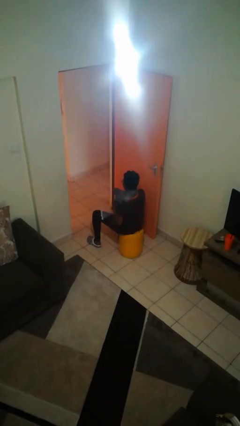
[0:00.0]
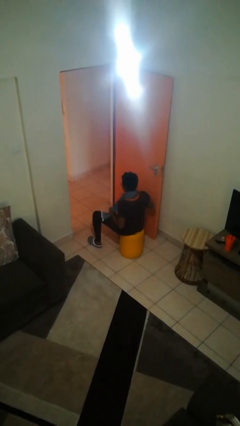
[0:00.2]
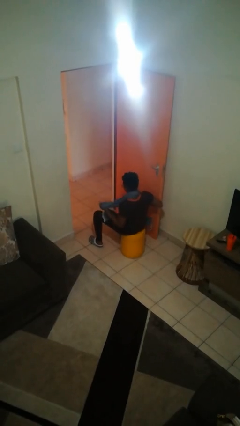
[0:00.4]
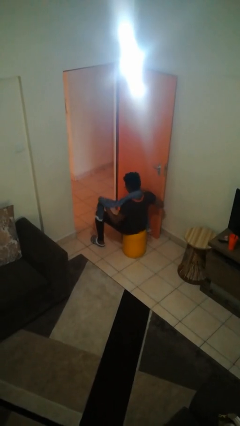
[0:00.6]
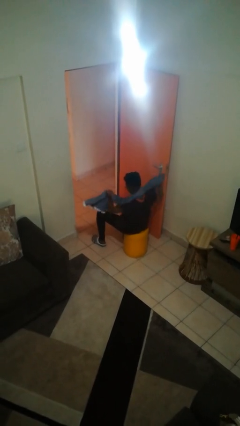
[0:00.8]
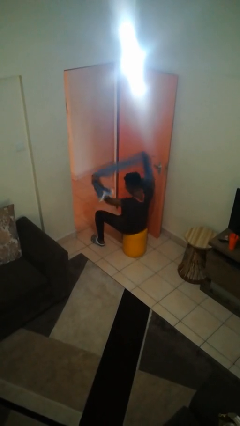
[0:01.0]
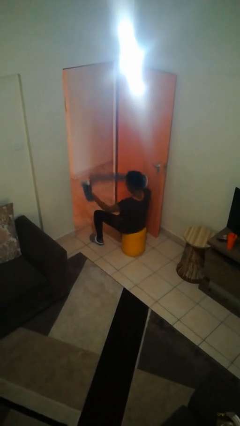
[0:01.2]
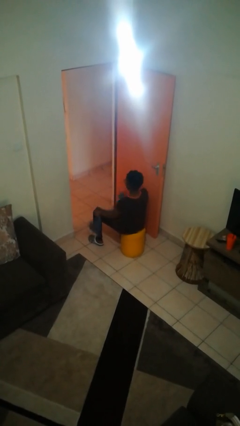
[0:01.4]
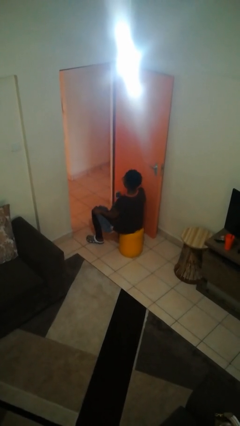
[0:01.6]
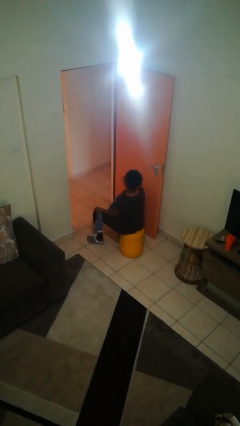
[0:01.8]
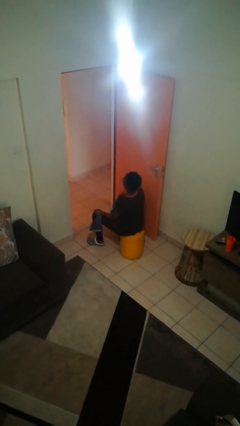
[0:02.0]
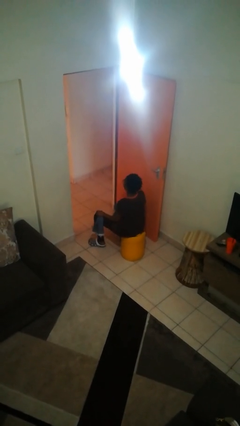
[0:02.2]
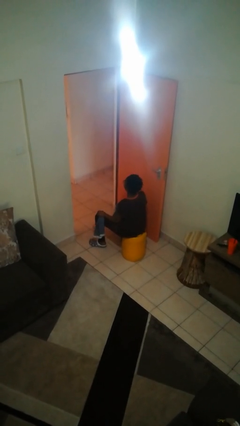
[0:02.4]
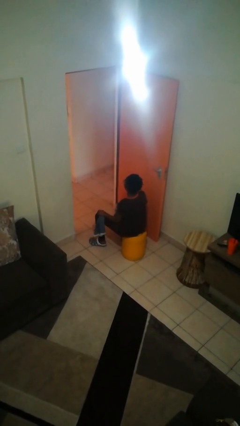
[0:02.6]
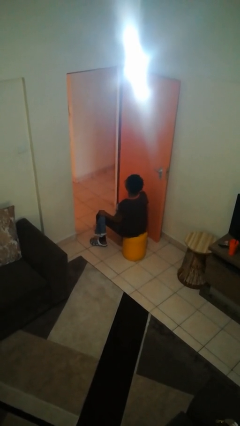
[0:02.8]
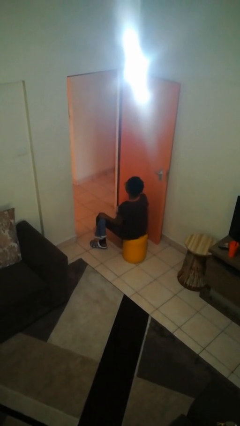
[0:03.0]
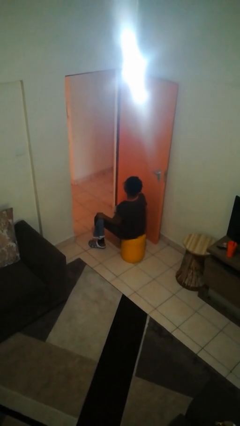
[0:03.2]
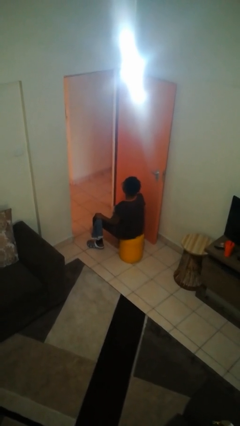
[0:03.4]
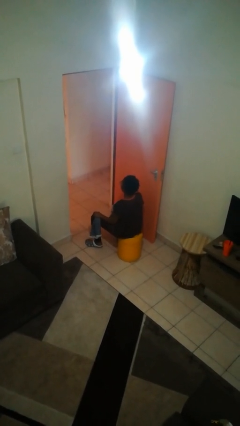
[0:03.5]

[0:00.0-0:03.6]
person takes off scarf

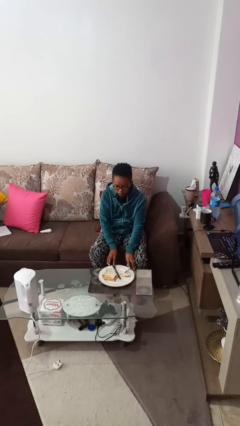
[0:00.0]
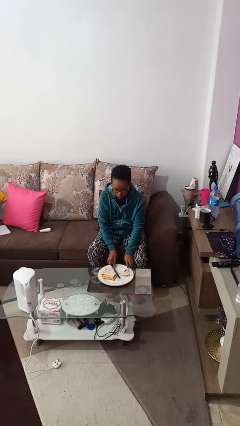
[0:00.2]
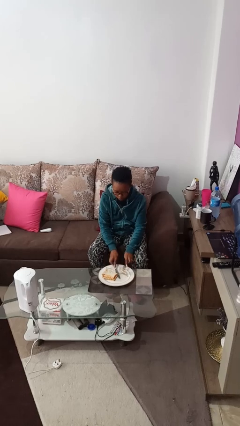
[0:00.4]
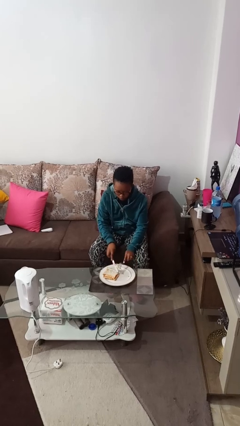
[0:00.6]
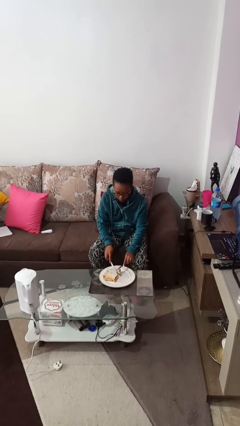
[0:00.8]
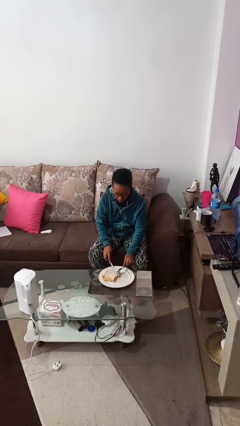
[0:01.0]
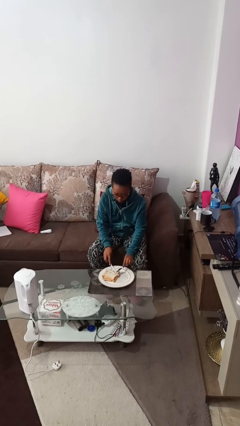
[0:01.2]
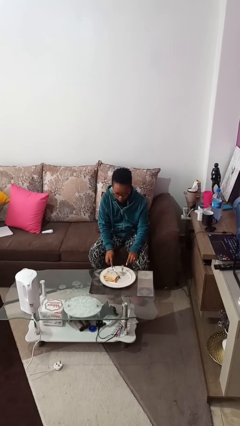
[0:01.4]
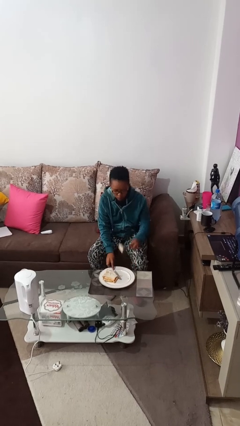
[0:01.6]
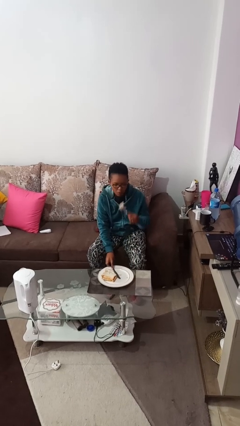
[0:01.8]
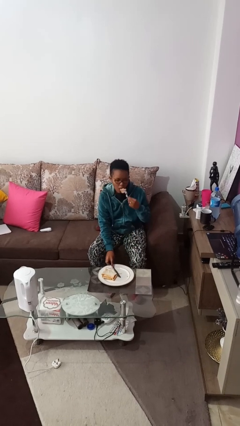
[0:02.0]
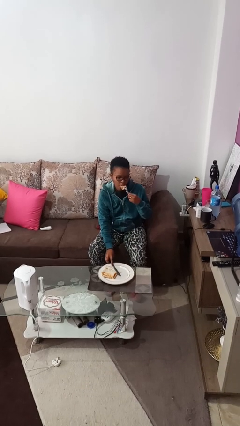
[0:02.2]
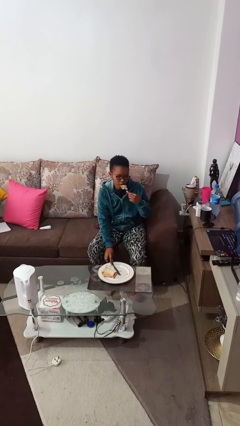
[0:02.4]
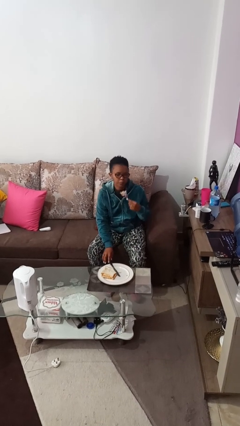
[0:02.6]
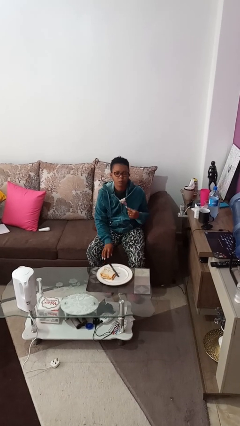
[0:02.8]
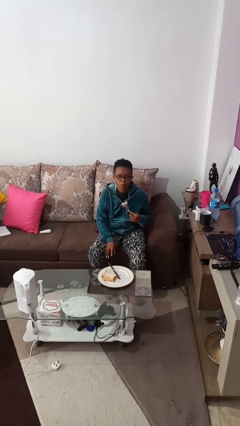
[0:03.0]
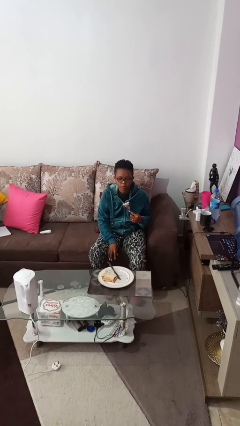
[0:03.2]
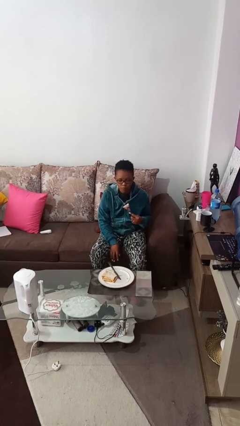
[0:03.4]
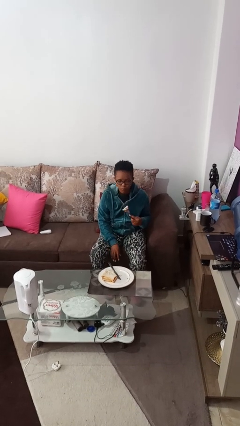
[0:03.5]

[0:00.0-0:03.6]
person eats with utensil

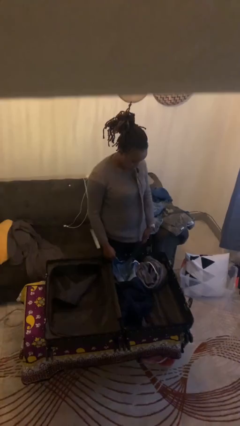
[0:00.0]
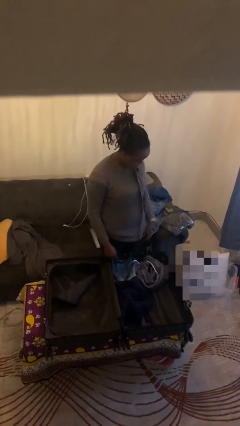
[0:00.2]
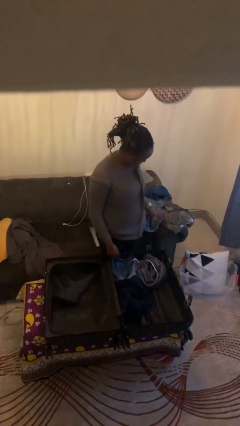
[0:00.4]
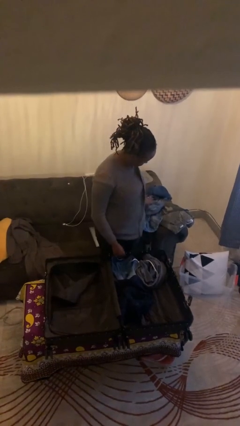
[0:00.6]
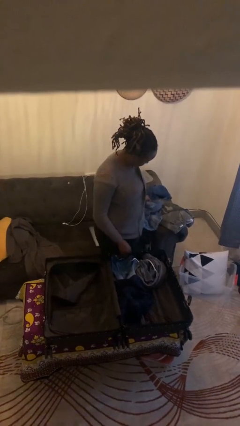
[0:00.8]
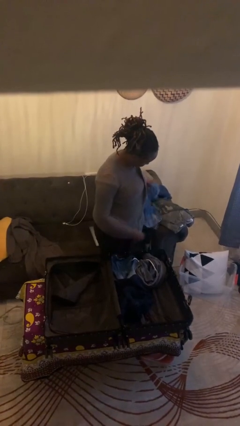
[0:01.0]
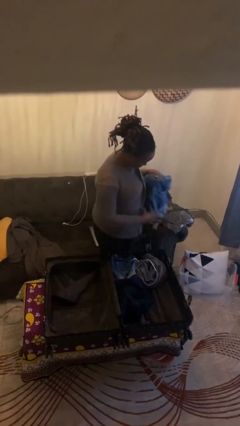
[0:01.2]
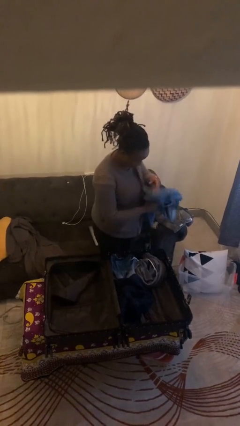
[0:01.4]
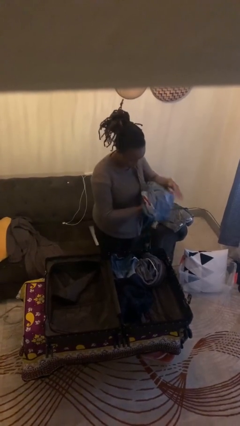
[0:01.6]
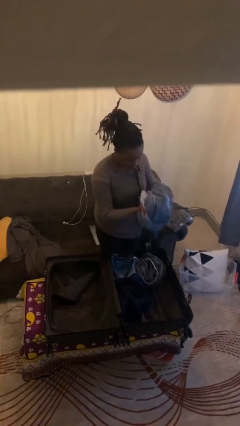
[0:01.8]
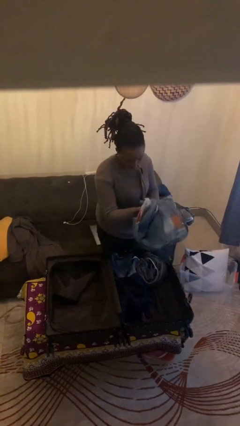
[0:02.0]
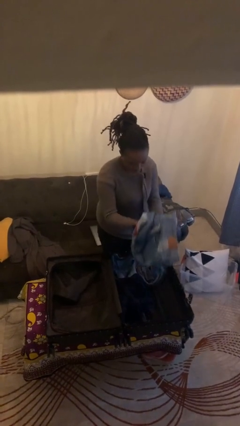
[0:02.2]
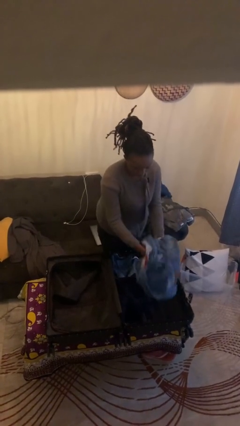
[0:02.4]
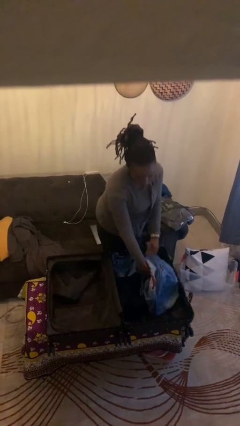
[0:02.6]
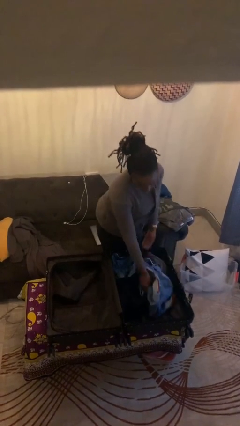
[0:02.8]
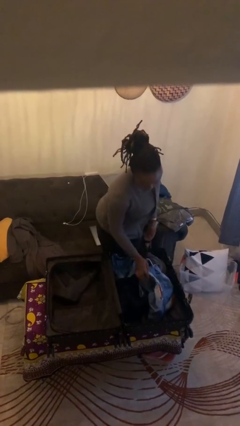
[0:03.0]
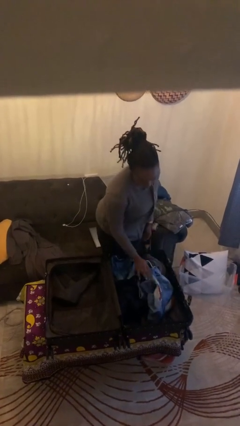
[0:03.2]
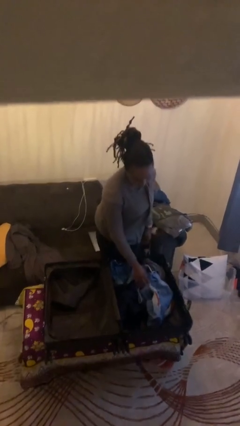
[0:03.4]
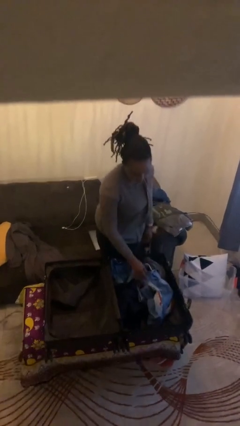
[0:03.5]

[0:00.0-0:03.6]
person loads clothes into suitcase

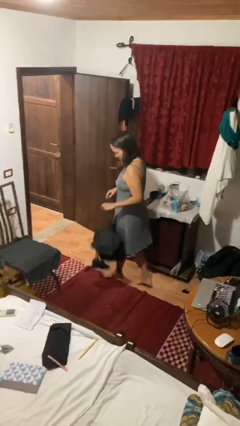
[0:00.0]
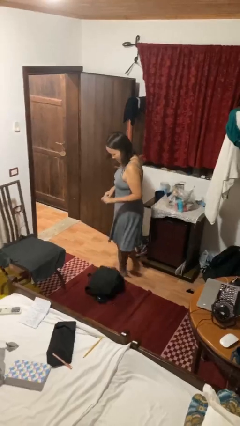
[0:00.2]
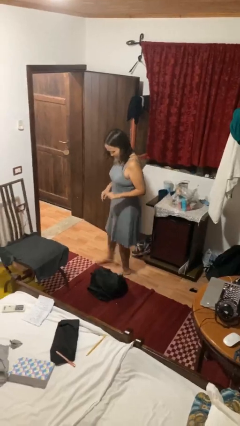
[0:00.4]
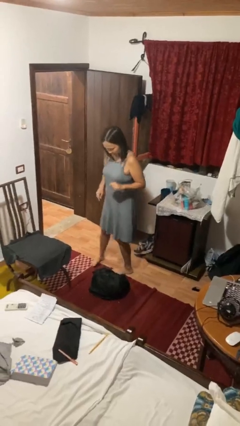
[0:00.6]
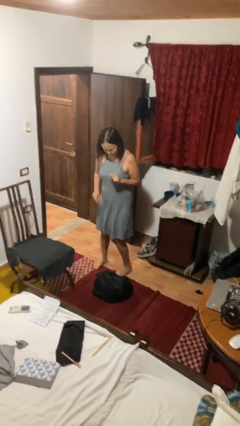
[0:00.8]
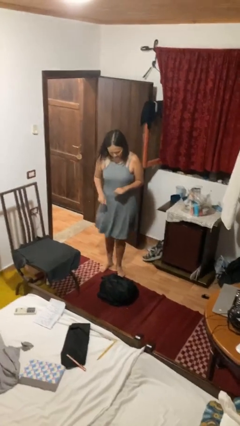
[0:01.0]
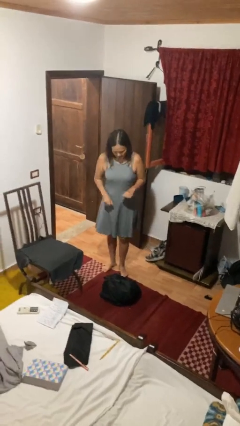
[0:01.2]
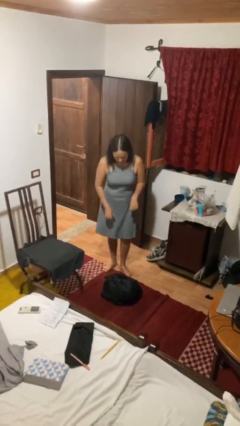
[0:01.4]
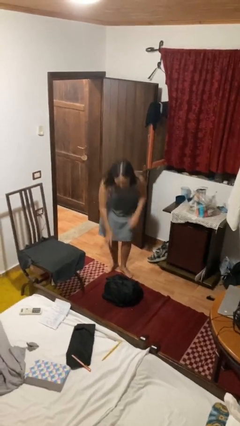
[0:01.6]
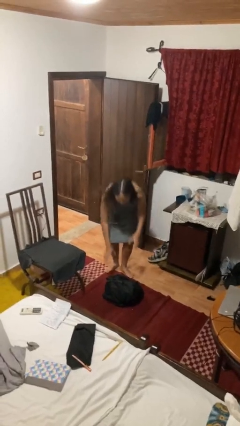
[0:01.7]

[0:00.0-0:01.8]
person drops object

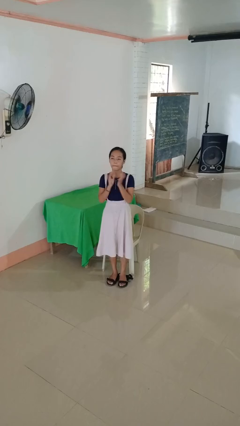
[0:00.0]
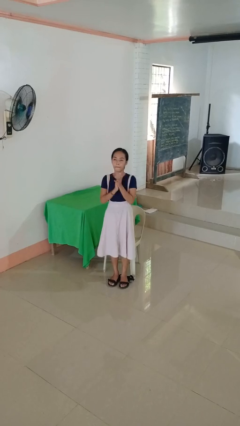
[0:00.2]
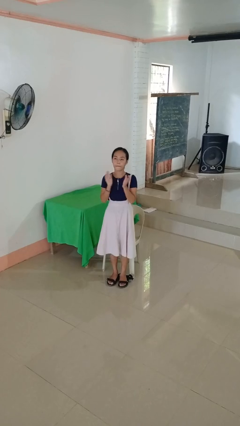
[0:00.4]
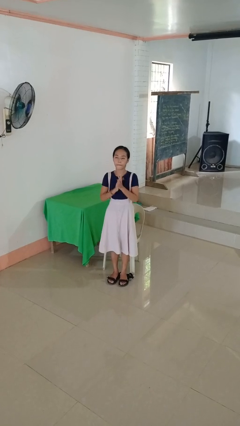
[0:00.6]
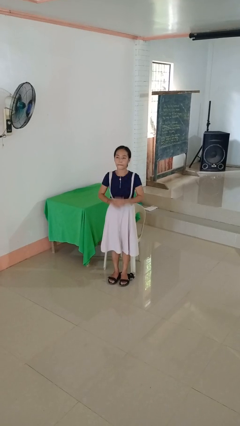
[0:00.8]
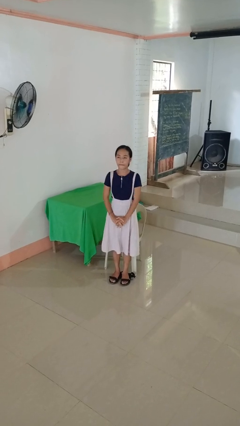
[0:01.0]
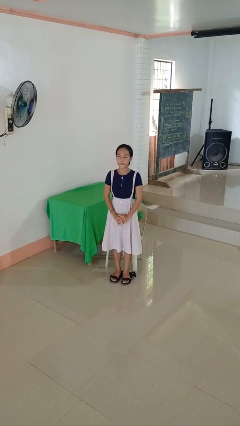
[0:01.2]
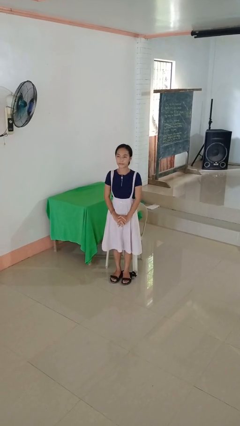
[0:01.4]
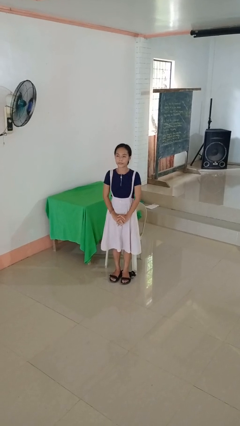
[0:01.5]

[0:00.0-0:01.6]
person claps hands

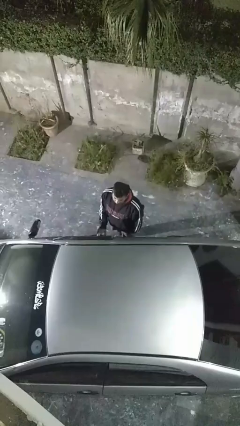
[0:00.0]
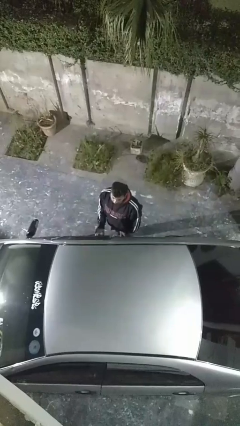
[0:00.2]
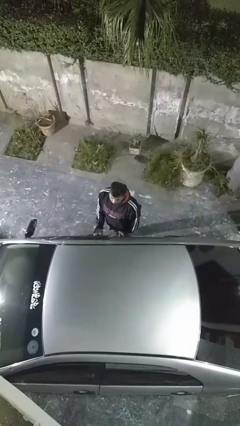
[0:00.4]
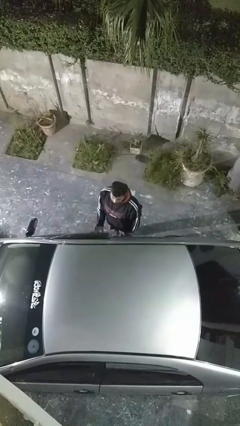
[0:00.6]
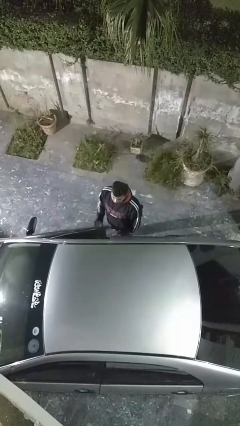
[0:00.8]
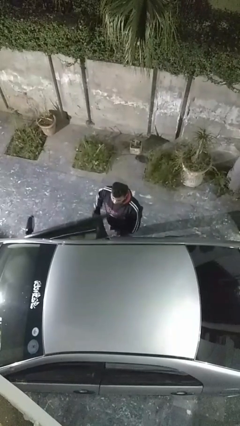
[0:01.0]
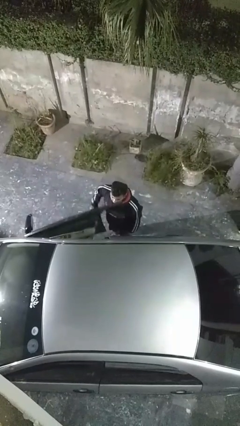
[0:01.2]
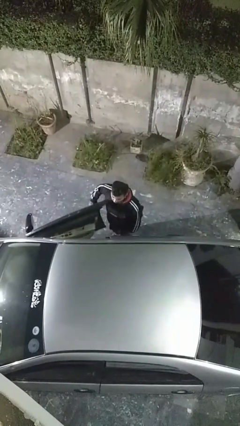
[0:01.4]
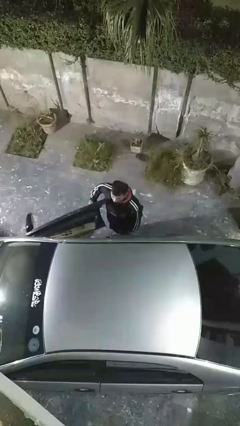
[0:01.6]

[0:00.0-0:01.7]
person opens car door

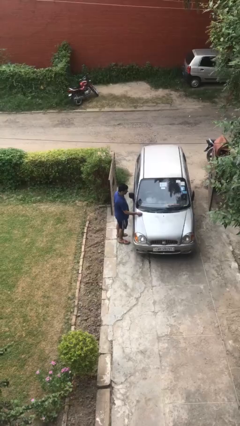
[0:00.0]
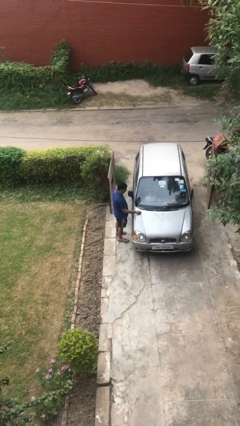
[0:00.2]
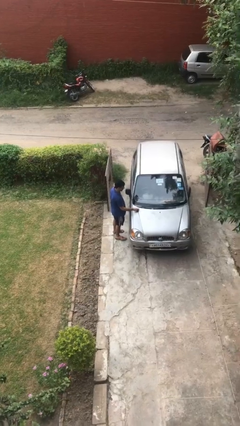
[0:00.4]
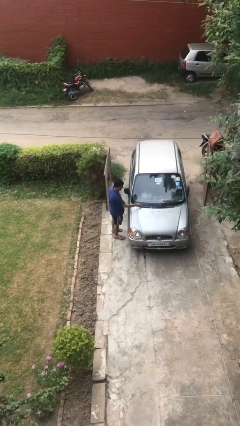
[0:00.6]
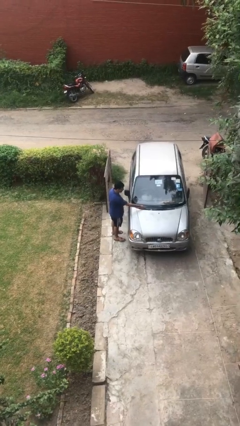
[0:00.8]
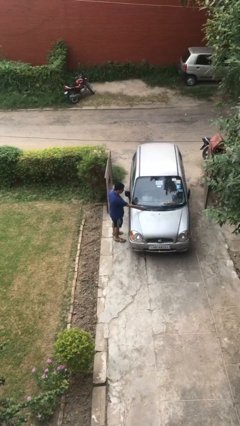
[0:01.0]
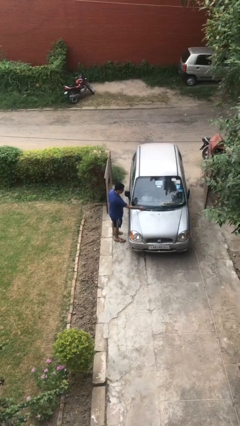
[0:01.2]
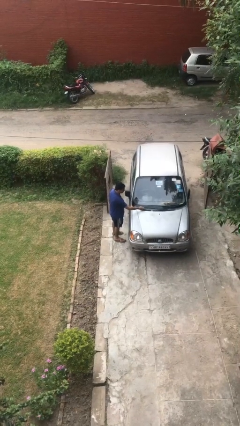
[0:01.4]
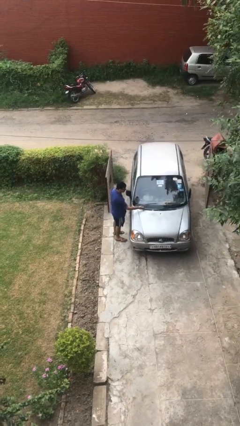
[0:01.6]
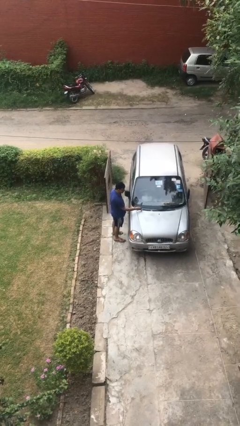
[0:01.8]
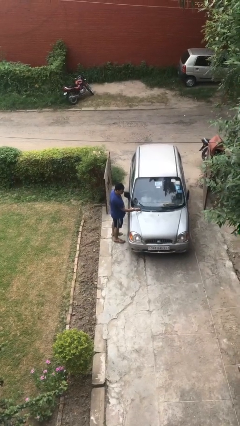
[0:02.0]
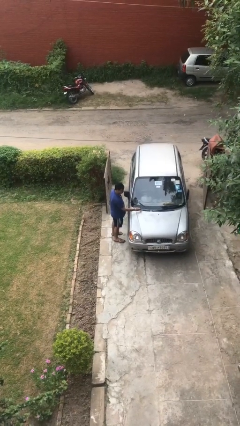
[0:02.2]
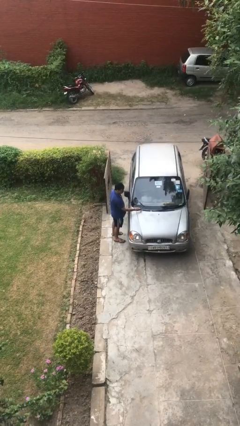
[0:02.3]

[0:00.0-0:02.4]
person flips up car wipers
